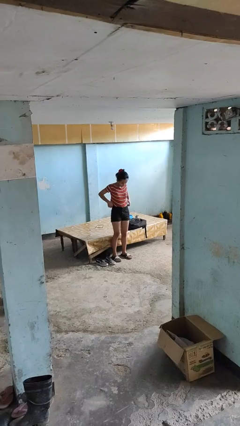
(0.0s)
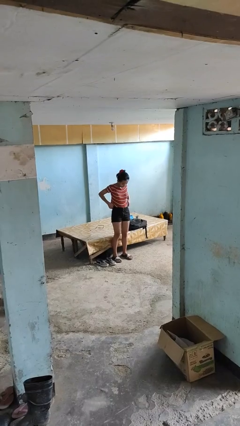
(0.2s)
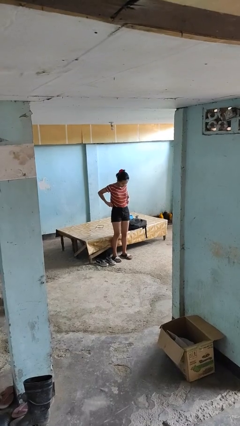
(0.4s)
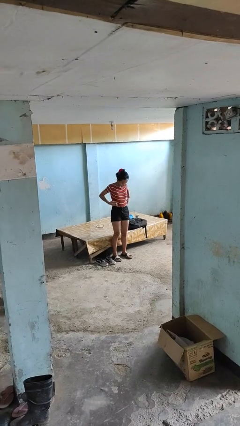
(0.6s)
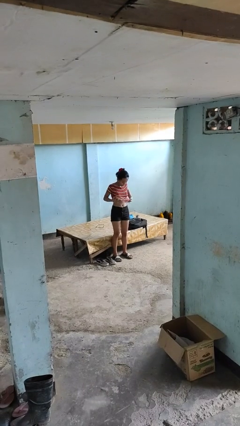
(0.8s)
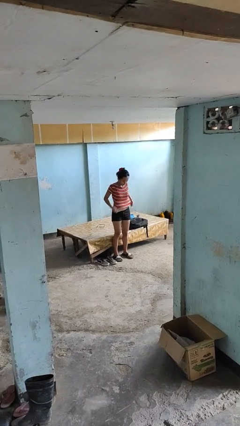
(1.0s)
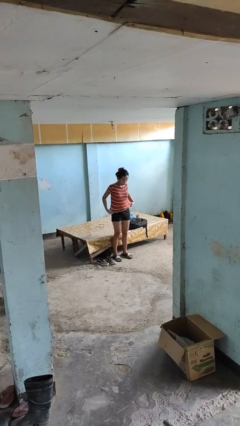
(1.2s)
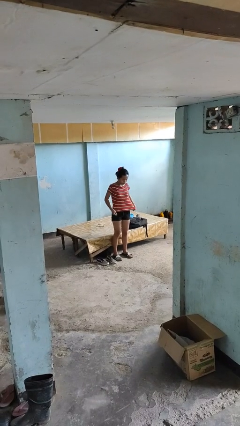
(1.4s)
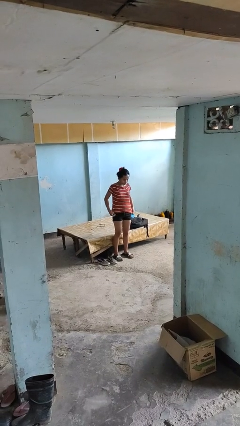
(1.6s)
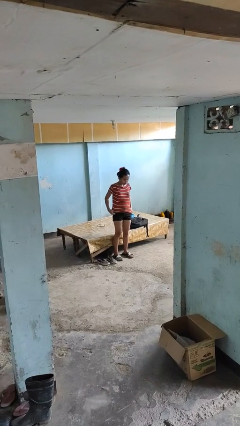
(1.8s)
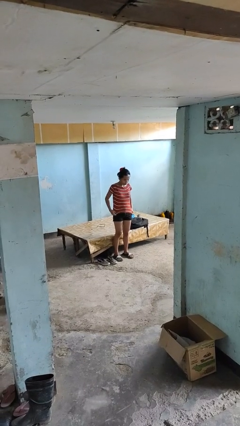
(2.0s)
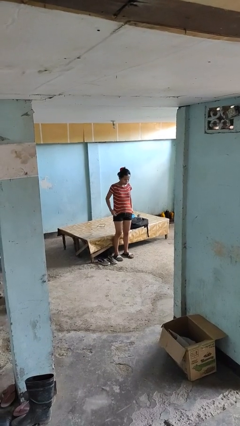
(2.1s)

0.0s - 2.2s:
person untucks shirt

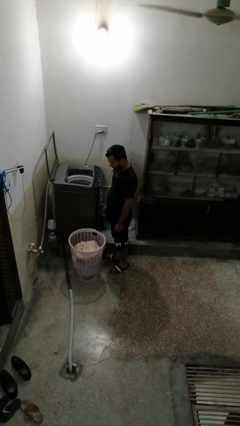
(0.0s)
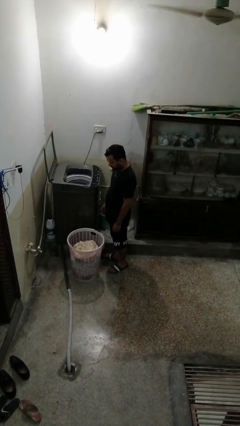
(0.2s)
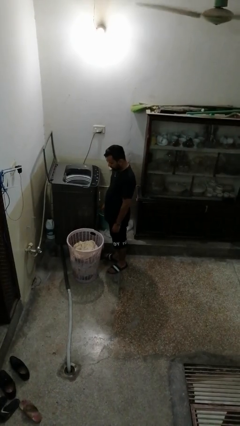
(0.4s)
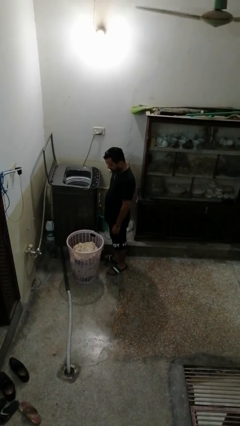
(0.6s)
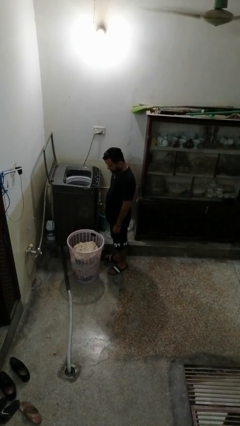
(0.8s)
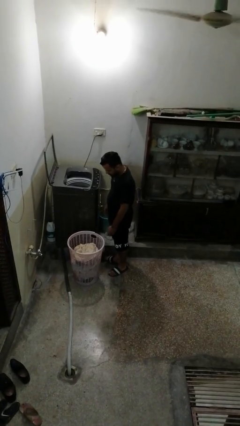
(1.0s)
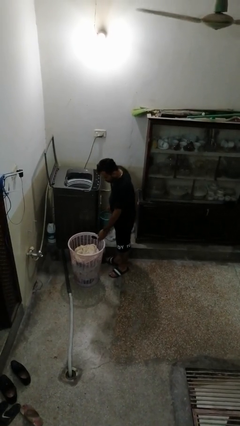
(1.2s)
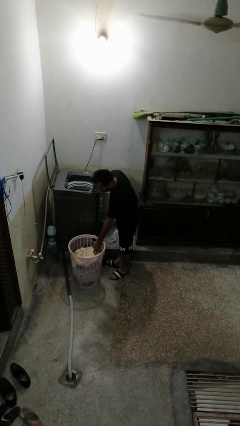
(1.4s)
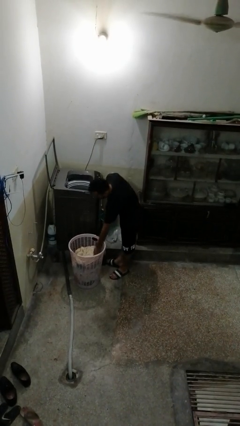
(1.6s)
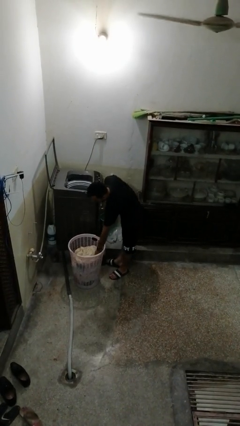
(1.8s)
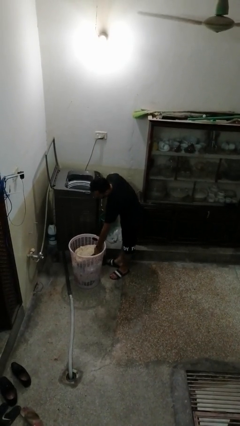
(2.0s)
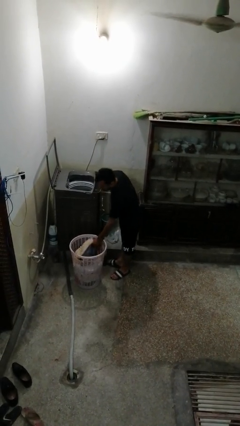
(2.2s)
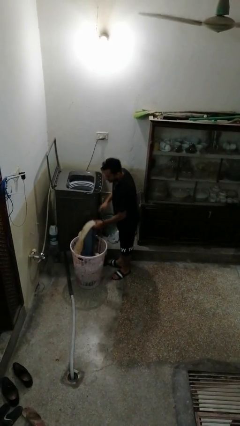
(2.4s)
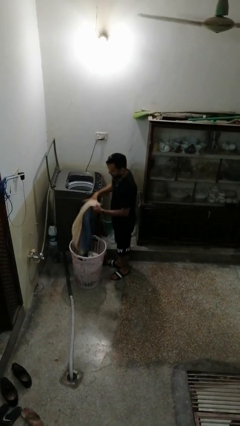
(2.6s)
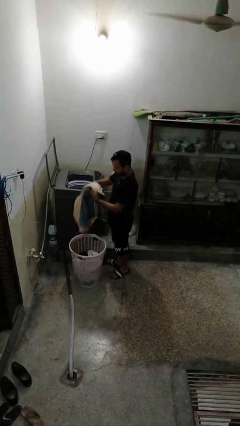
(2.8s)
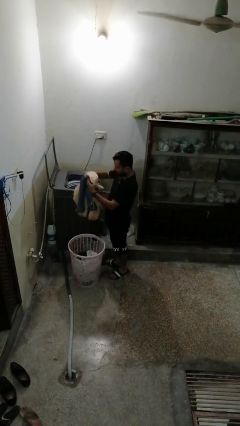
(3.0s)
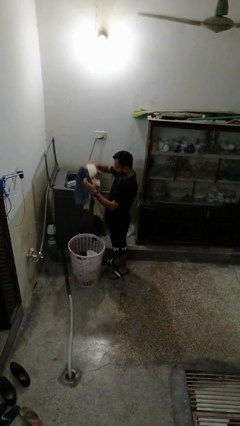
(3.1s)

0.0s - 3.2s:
person loads dryer

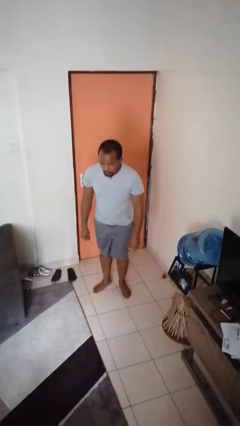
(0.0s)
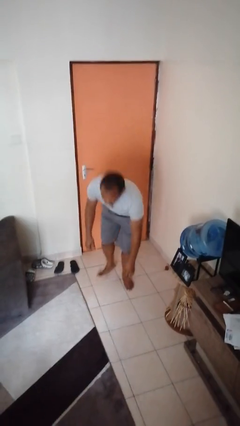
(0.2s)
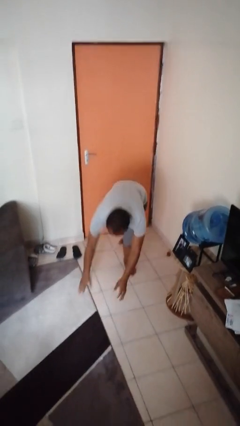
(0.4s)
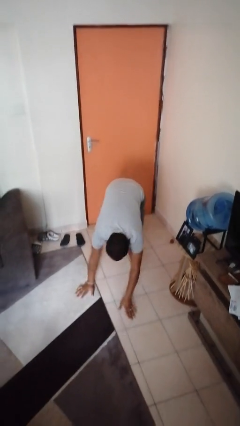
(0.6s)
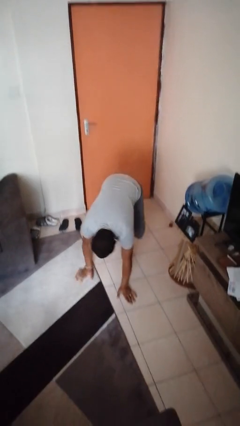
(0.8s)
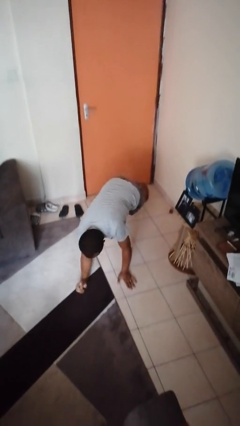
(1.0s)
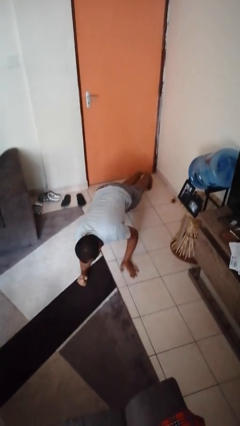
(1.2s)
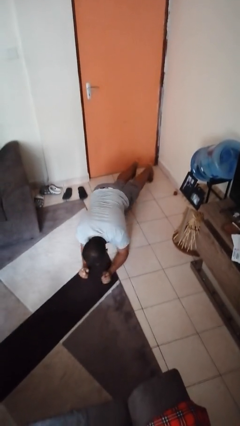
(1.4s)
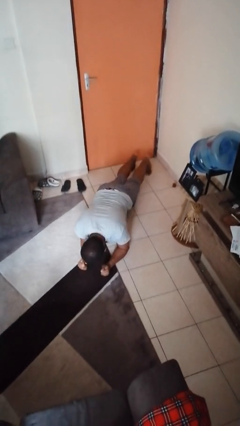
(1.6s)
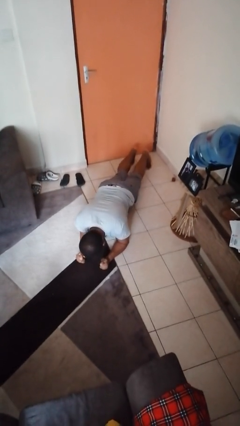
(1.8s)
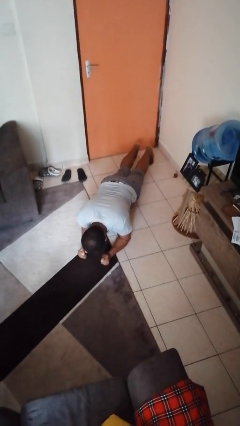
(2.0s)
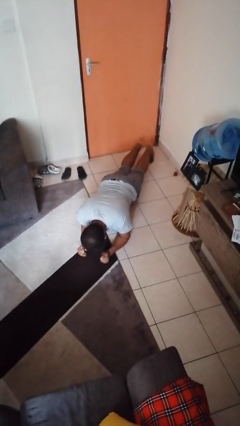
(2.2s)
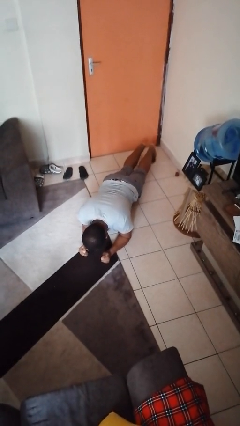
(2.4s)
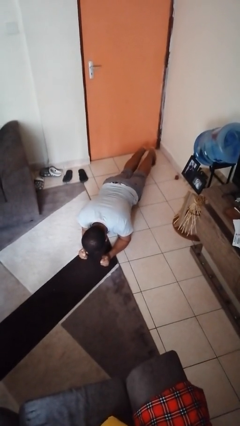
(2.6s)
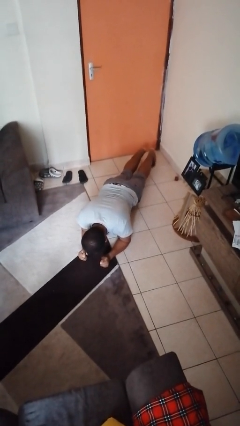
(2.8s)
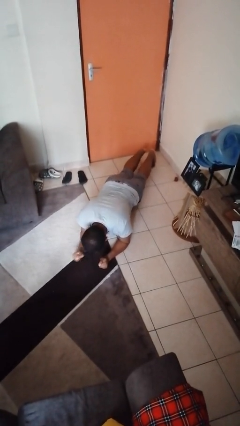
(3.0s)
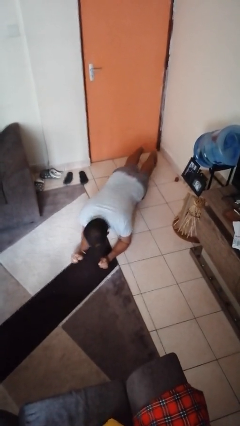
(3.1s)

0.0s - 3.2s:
person exercises with plank

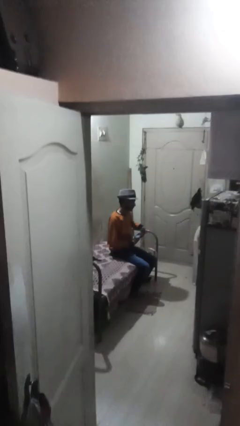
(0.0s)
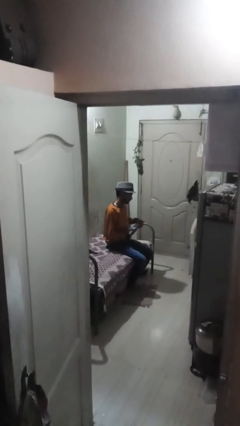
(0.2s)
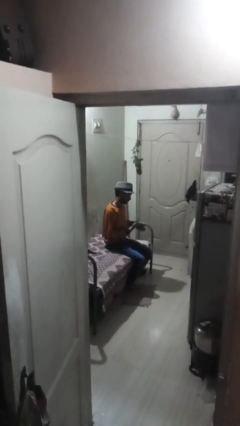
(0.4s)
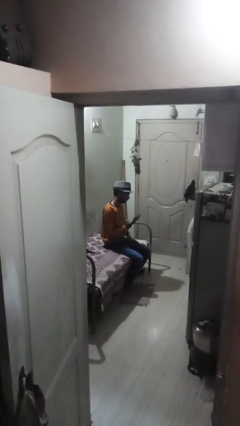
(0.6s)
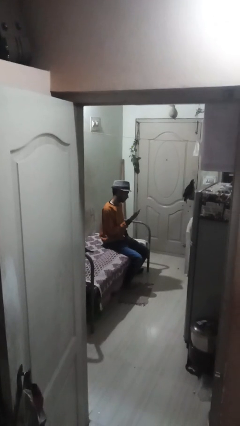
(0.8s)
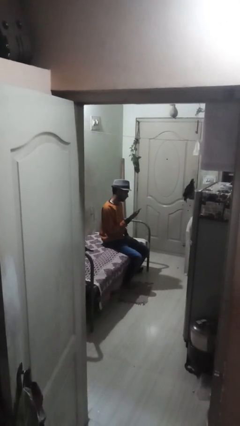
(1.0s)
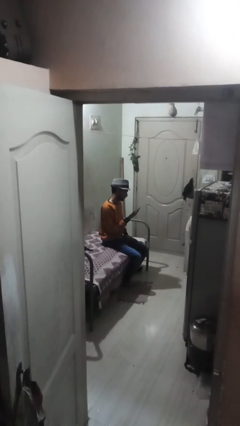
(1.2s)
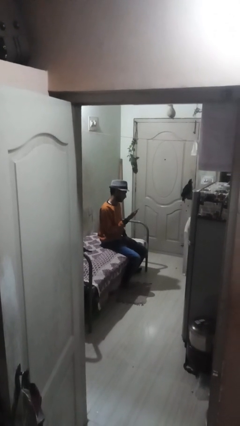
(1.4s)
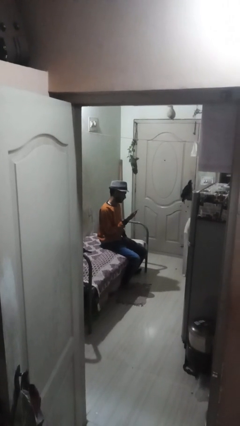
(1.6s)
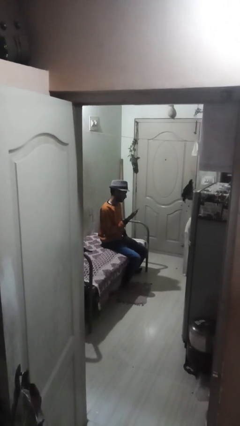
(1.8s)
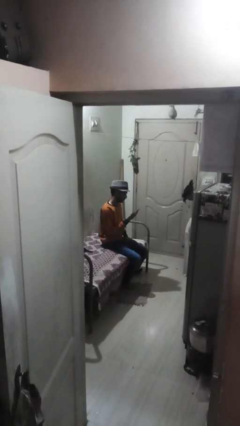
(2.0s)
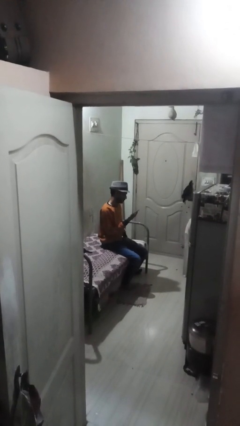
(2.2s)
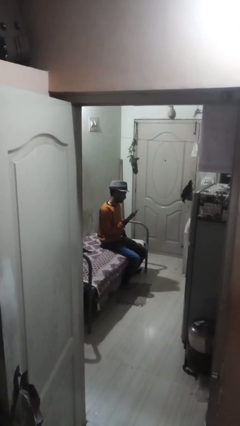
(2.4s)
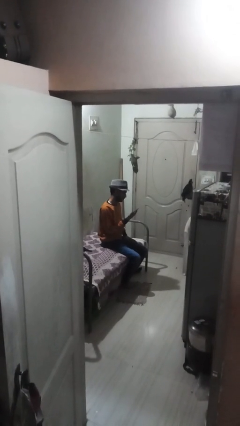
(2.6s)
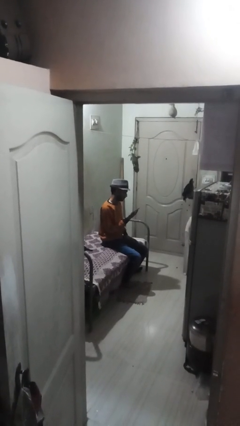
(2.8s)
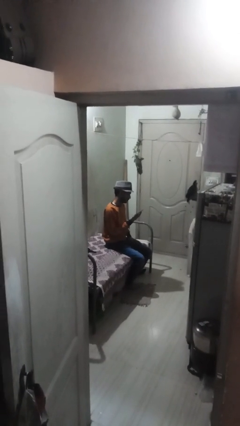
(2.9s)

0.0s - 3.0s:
person takes phone from pocket

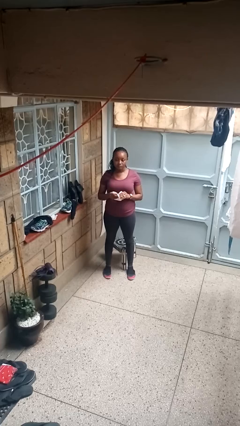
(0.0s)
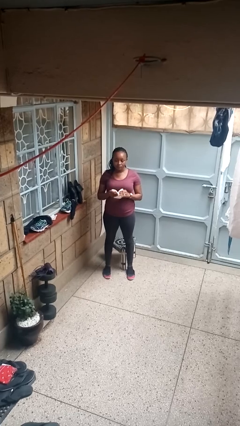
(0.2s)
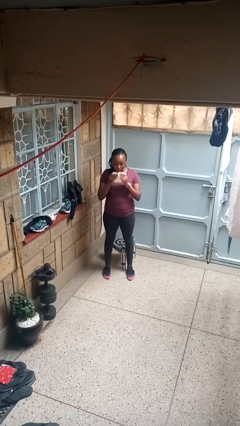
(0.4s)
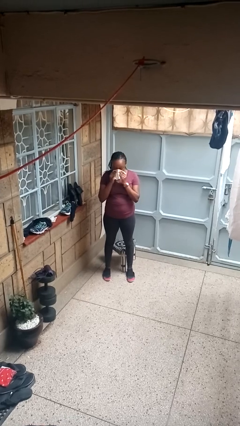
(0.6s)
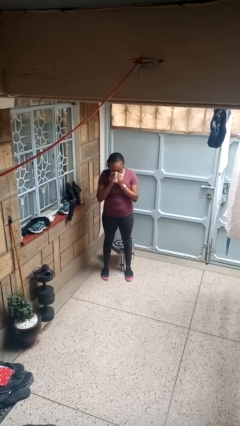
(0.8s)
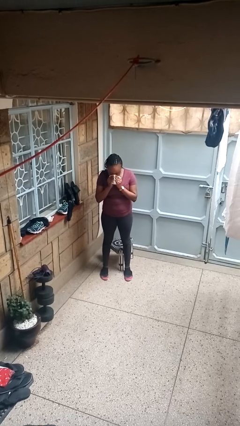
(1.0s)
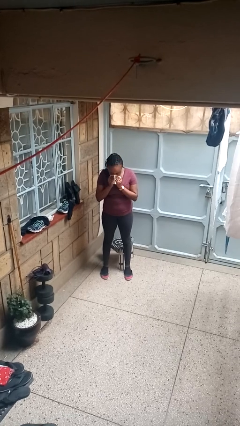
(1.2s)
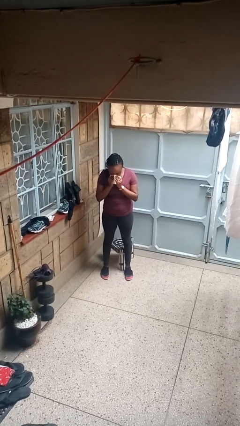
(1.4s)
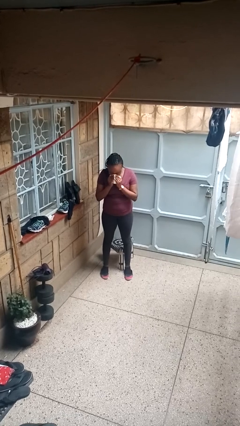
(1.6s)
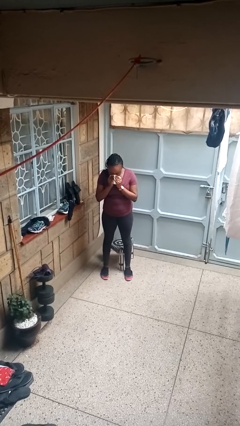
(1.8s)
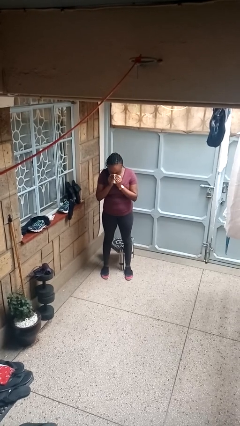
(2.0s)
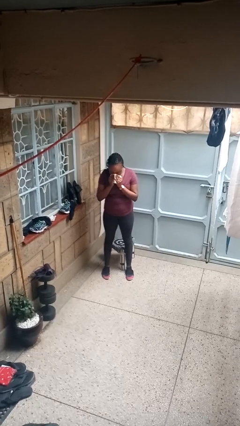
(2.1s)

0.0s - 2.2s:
person blows nose

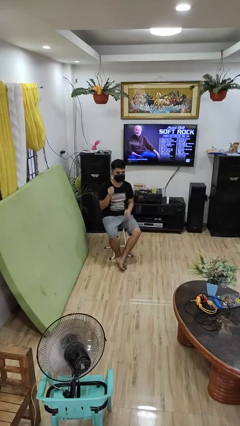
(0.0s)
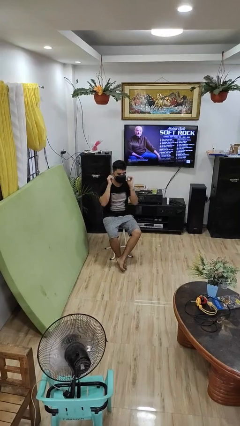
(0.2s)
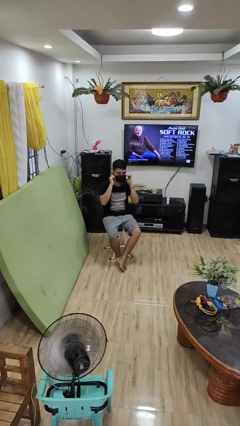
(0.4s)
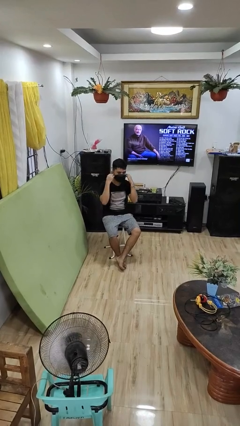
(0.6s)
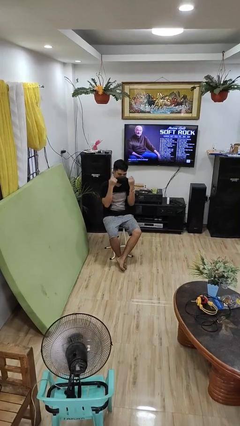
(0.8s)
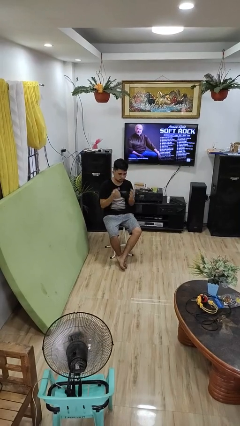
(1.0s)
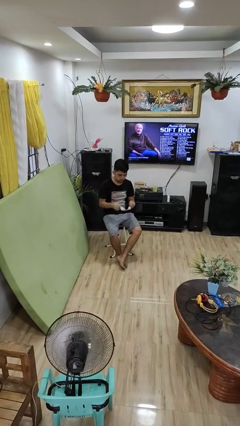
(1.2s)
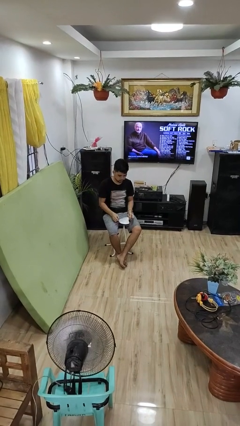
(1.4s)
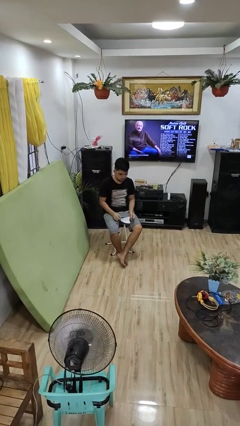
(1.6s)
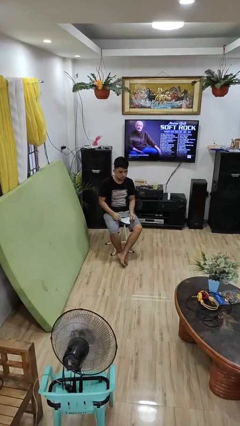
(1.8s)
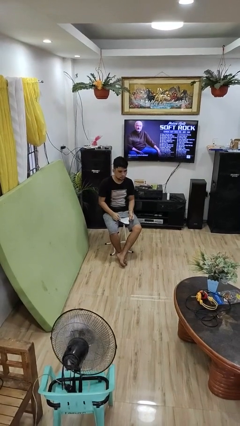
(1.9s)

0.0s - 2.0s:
person takes off facemask

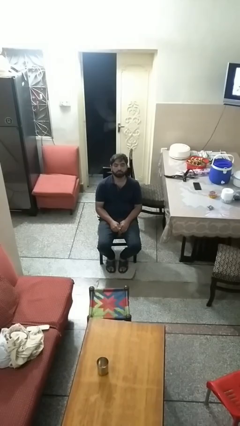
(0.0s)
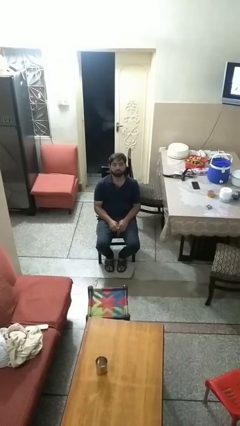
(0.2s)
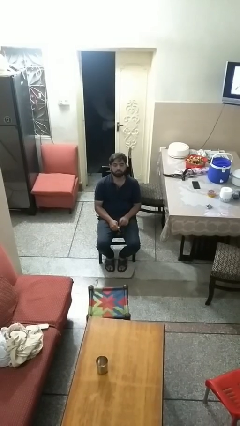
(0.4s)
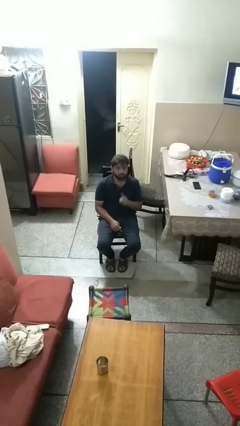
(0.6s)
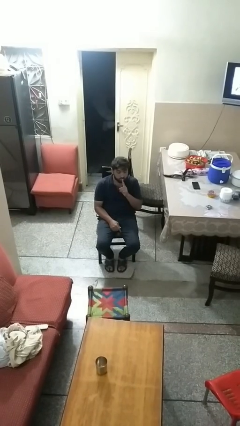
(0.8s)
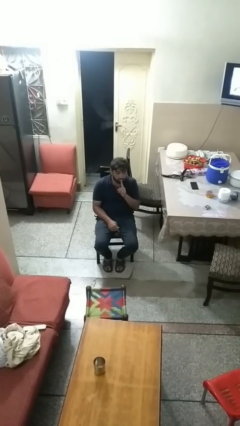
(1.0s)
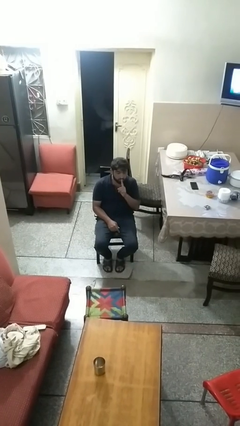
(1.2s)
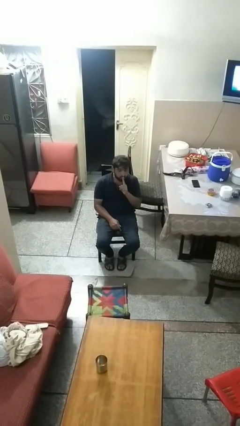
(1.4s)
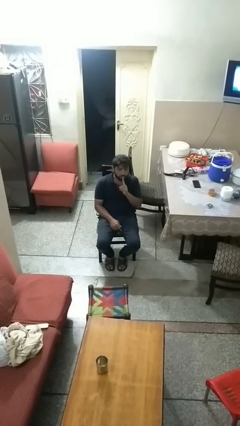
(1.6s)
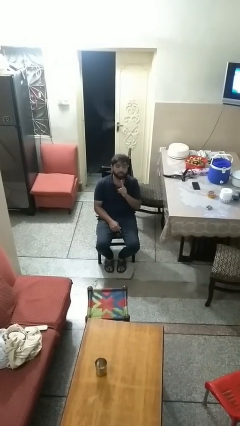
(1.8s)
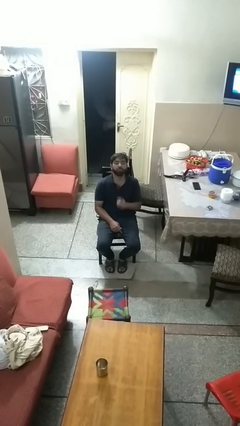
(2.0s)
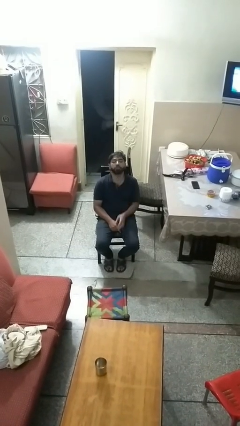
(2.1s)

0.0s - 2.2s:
person gestures be quiet
